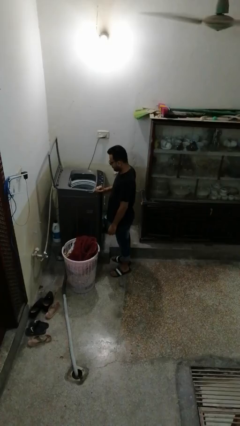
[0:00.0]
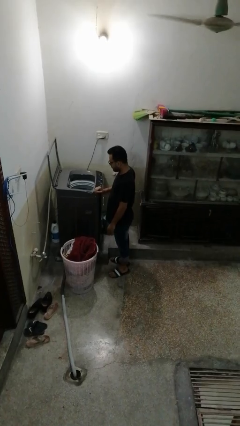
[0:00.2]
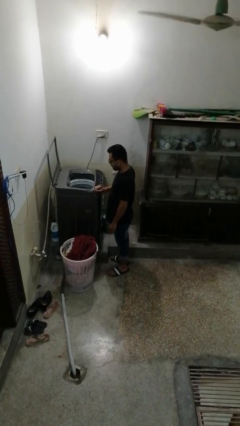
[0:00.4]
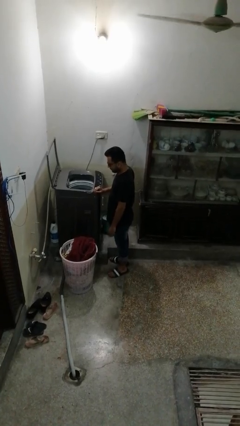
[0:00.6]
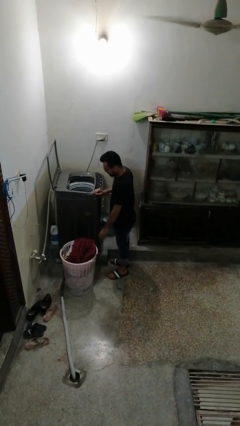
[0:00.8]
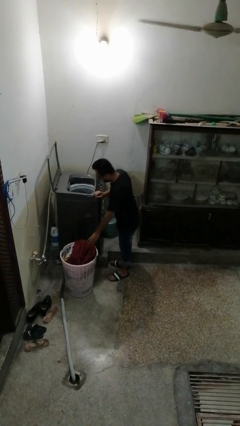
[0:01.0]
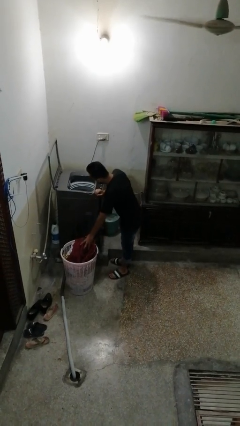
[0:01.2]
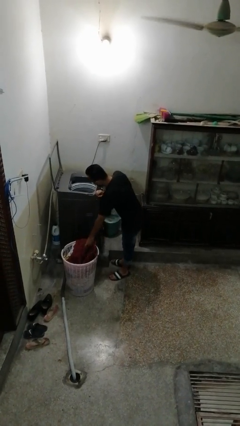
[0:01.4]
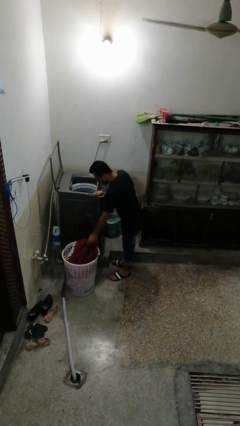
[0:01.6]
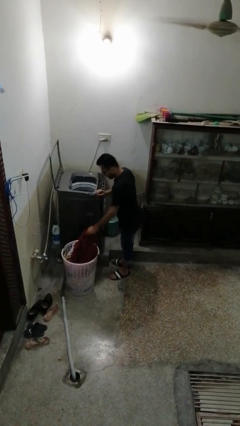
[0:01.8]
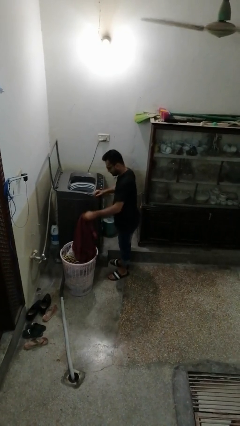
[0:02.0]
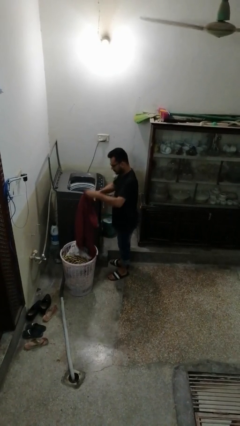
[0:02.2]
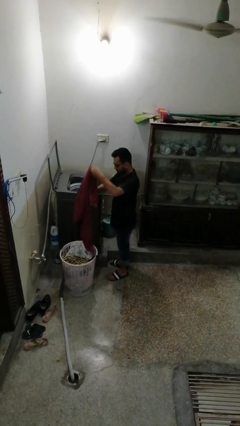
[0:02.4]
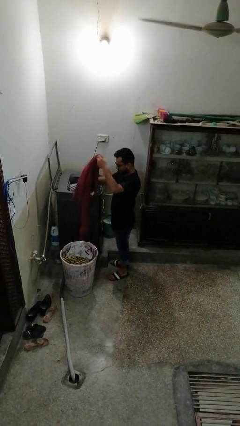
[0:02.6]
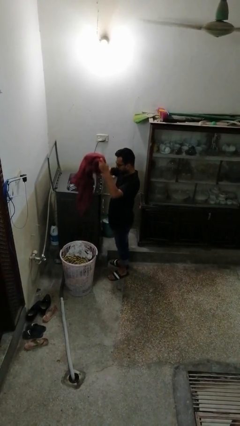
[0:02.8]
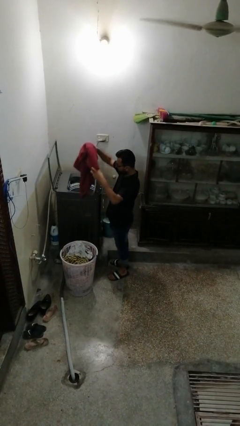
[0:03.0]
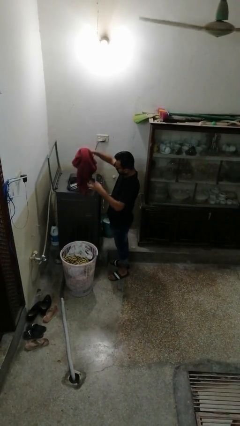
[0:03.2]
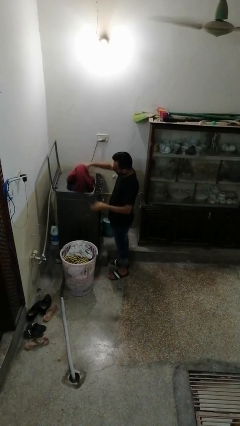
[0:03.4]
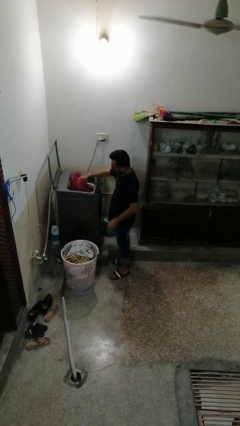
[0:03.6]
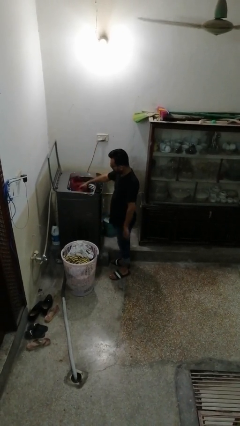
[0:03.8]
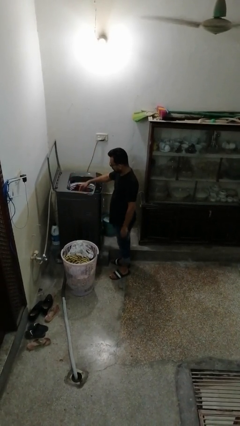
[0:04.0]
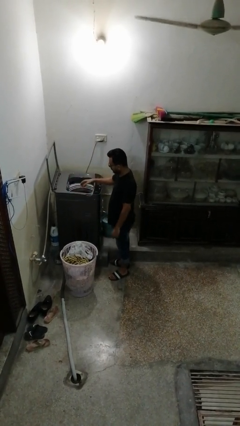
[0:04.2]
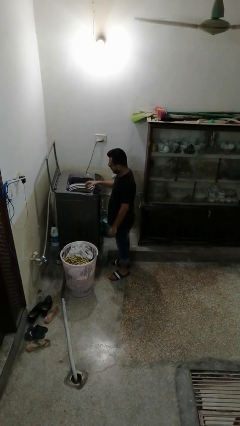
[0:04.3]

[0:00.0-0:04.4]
person loads clotheswasher

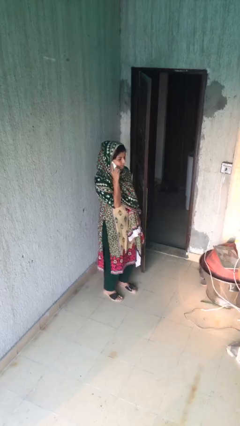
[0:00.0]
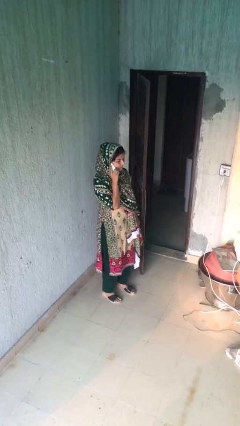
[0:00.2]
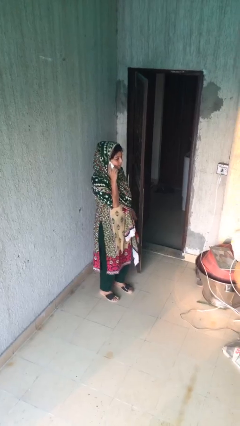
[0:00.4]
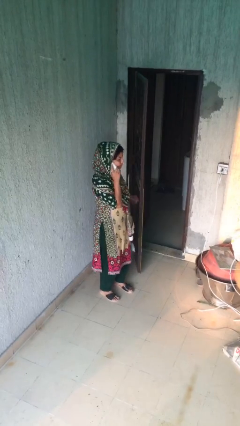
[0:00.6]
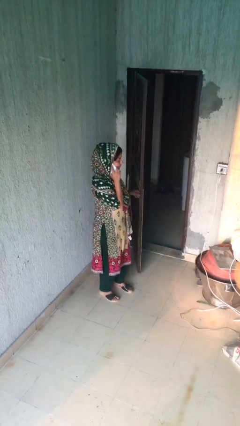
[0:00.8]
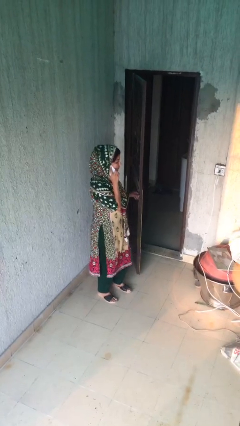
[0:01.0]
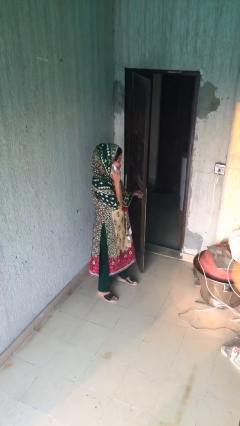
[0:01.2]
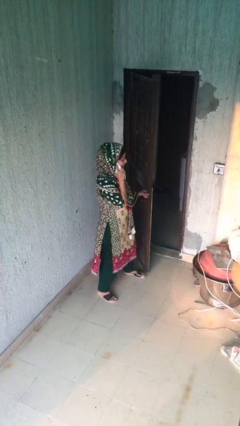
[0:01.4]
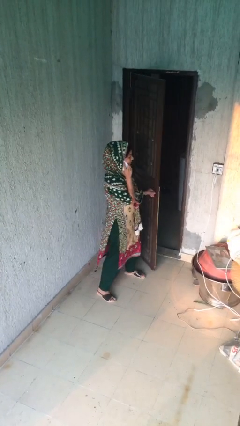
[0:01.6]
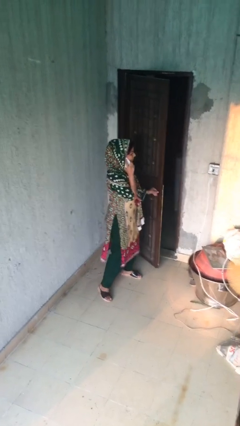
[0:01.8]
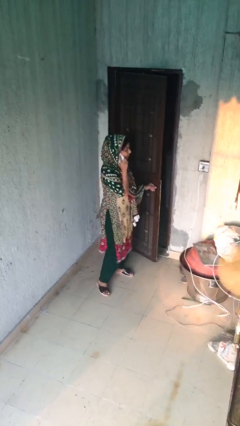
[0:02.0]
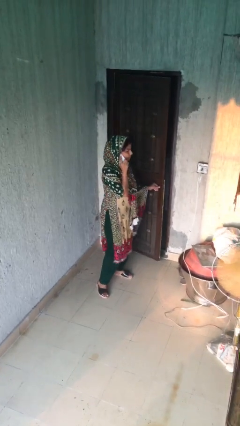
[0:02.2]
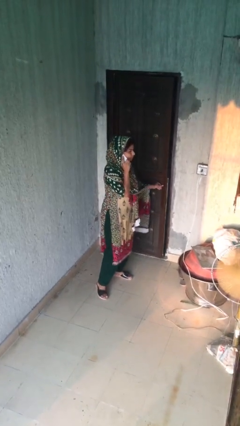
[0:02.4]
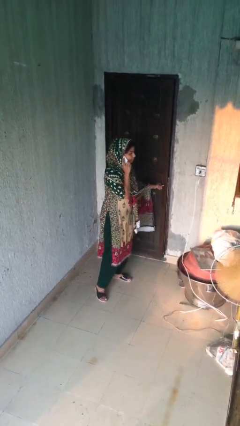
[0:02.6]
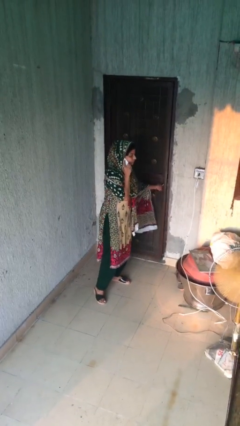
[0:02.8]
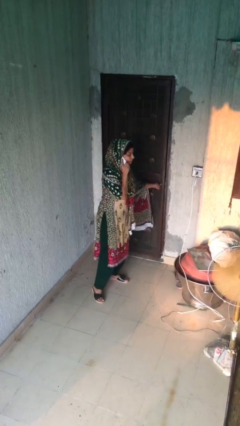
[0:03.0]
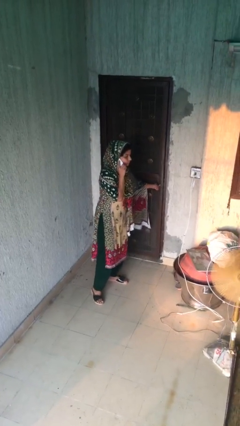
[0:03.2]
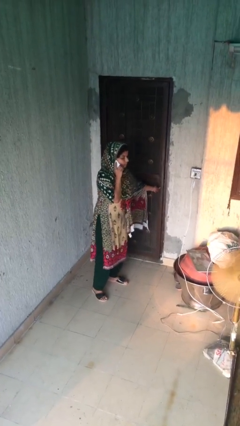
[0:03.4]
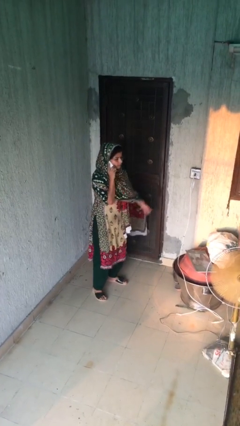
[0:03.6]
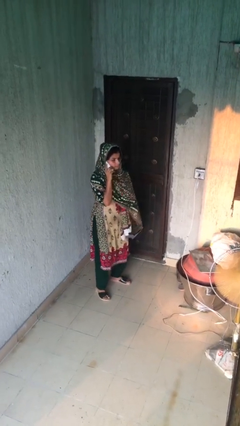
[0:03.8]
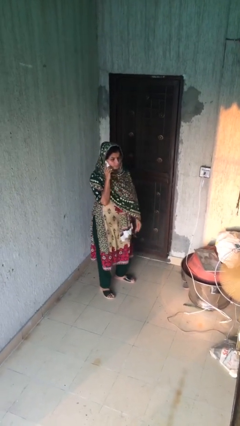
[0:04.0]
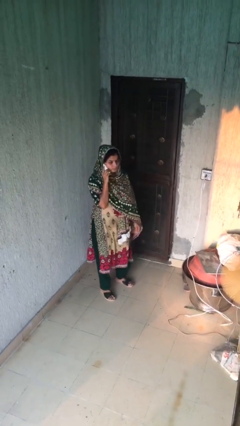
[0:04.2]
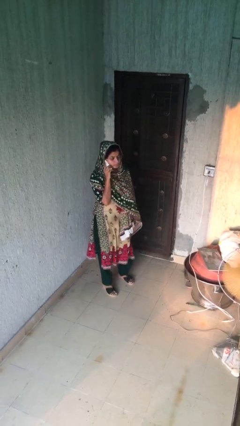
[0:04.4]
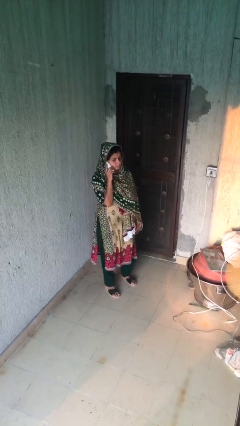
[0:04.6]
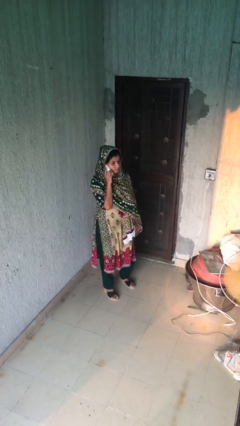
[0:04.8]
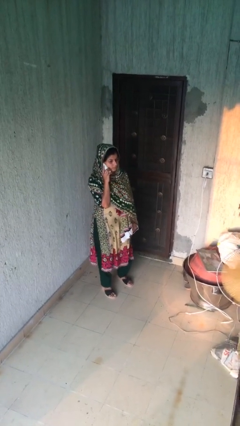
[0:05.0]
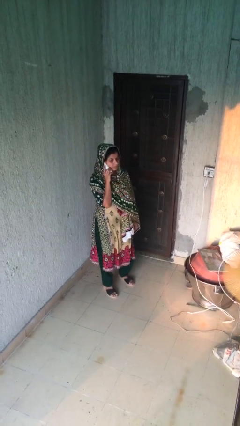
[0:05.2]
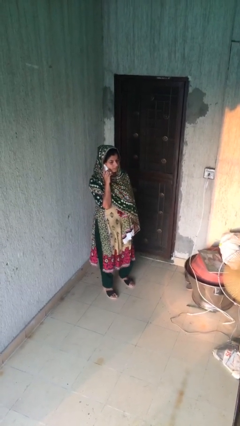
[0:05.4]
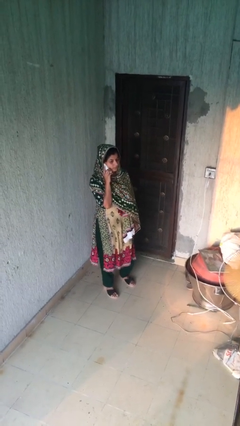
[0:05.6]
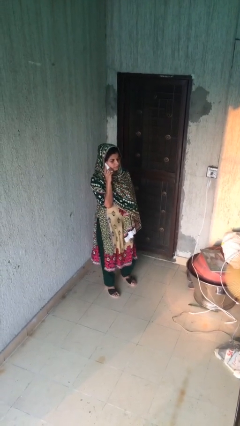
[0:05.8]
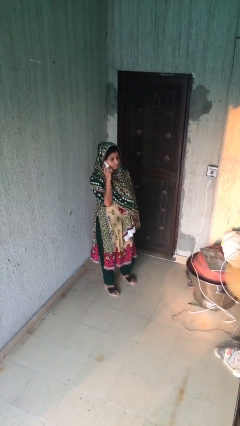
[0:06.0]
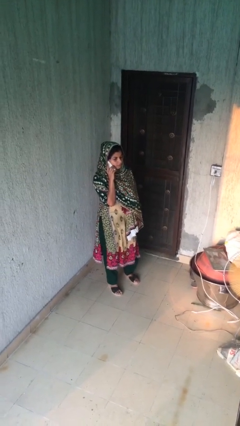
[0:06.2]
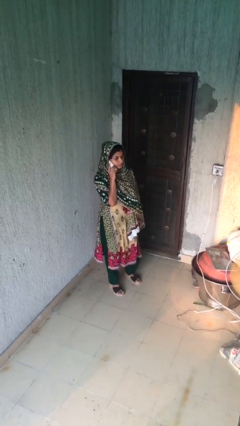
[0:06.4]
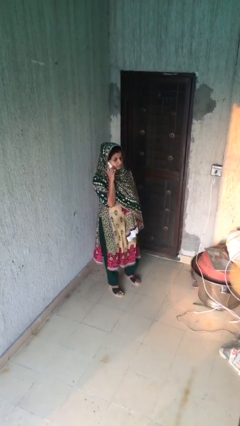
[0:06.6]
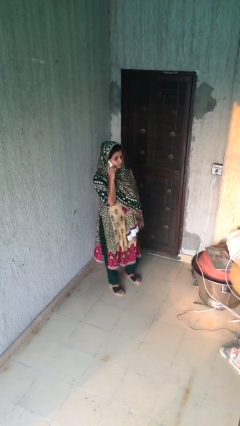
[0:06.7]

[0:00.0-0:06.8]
person closes facility door

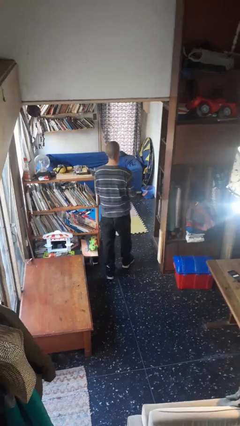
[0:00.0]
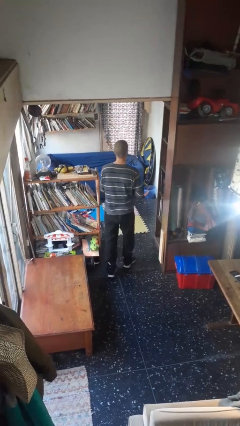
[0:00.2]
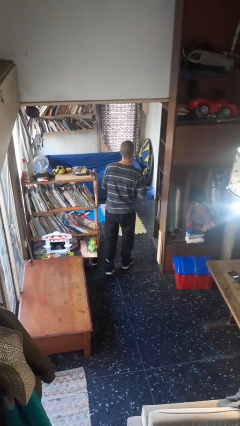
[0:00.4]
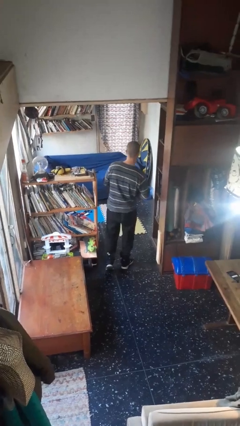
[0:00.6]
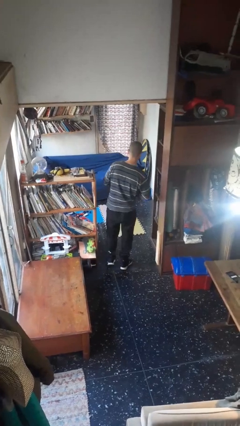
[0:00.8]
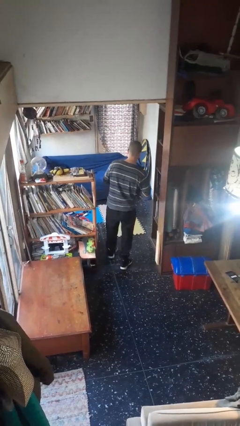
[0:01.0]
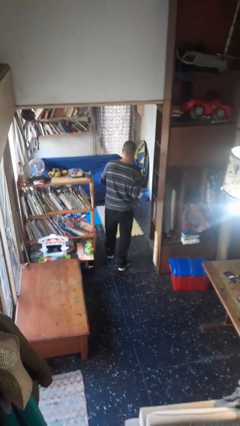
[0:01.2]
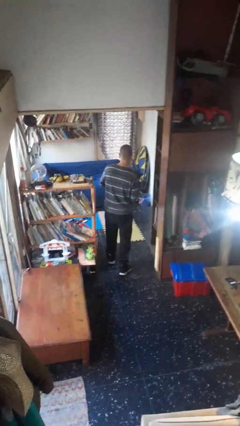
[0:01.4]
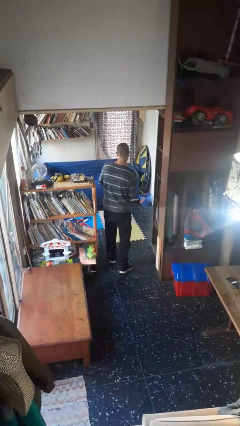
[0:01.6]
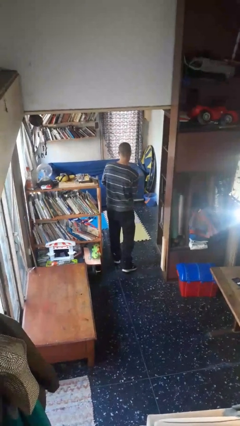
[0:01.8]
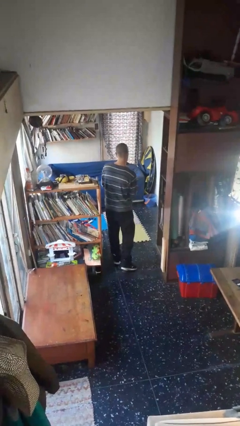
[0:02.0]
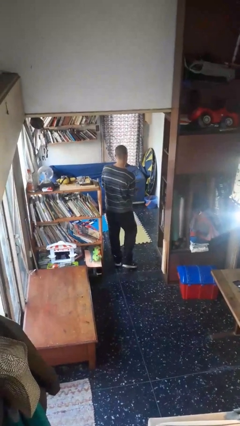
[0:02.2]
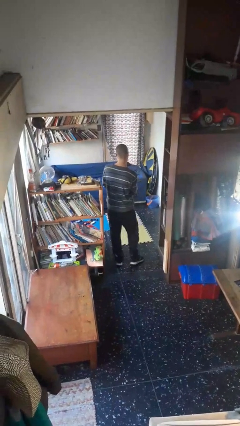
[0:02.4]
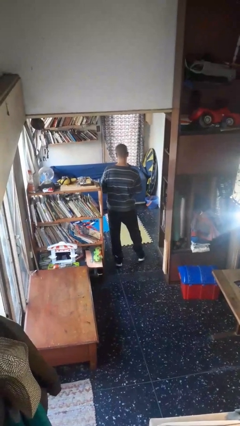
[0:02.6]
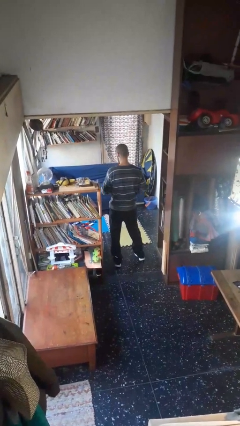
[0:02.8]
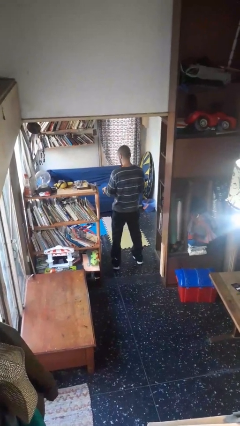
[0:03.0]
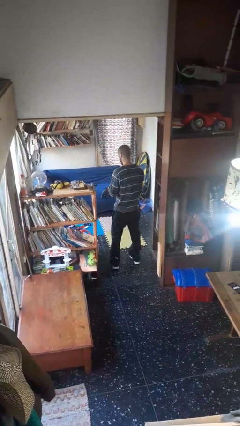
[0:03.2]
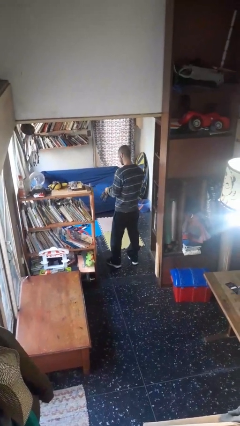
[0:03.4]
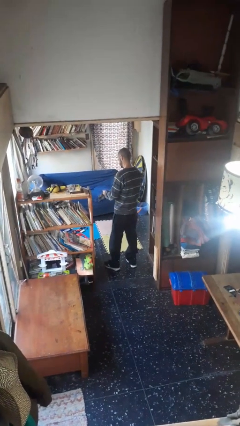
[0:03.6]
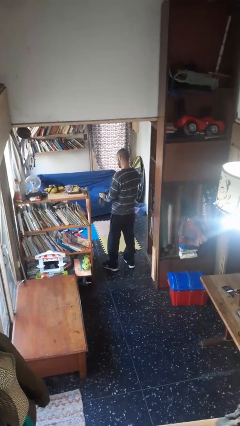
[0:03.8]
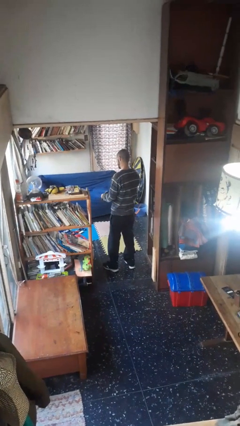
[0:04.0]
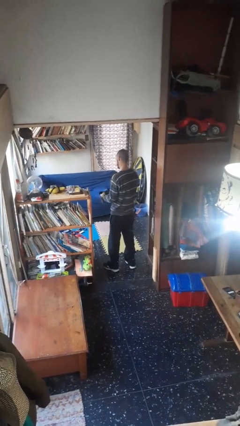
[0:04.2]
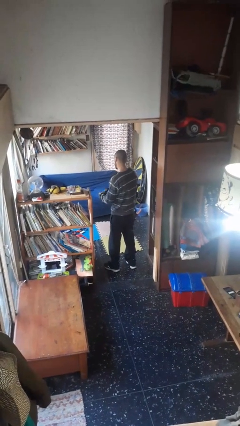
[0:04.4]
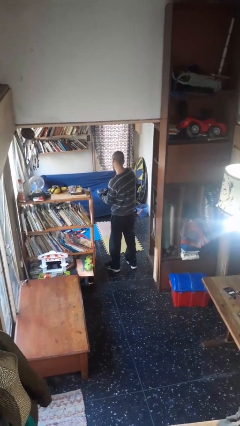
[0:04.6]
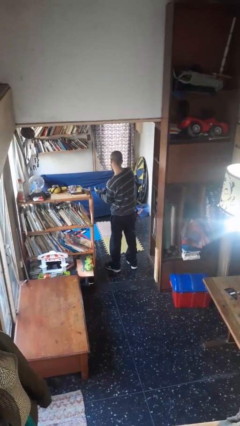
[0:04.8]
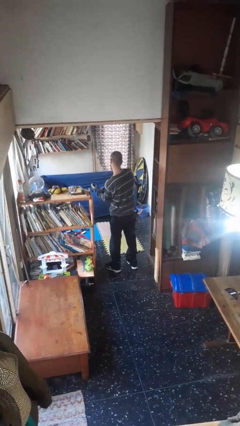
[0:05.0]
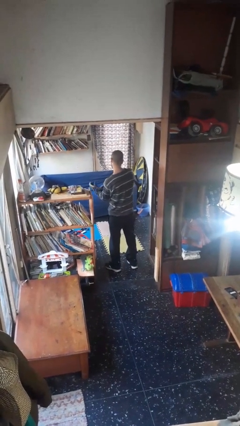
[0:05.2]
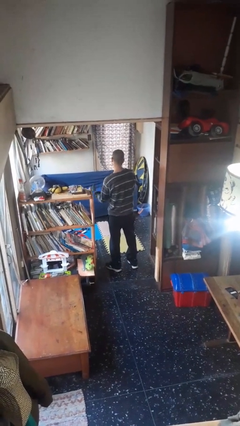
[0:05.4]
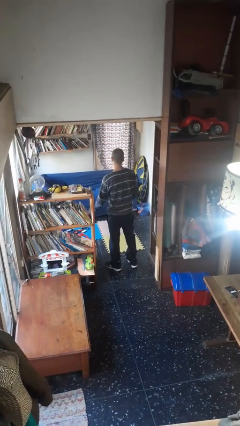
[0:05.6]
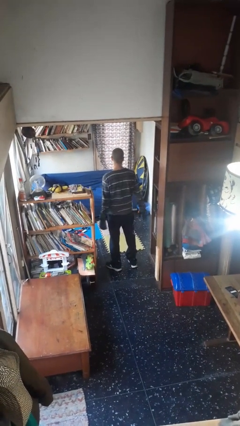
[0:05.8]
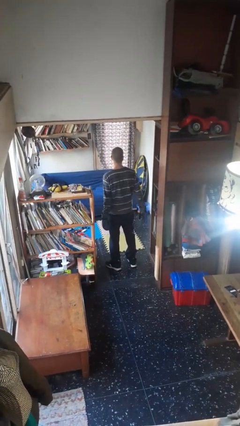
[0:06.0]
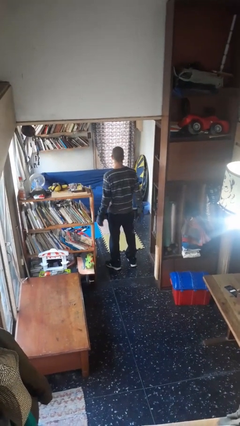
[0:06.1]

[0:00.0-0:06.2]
person puts on gloves

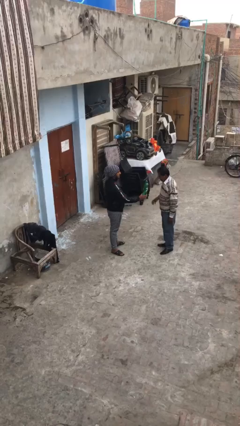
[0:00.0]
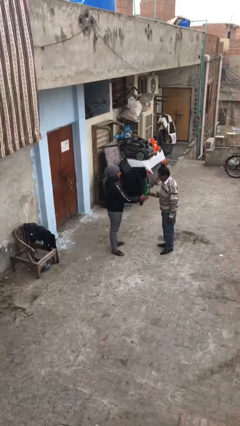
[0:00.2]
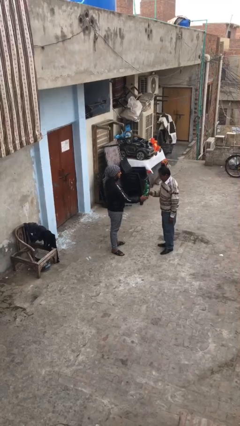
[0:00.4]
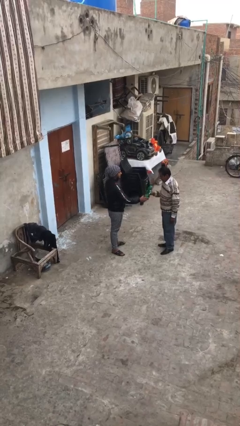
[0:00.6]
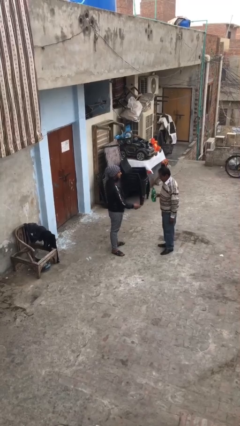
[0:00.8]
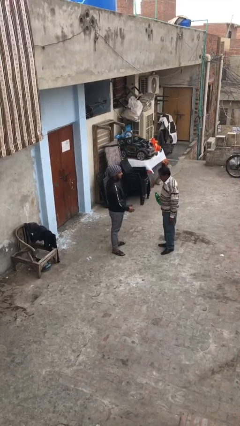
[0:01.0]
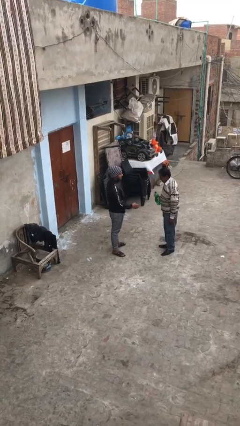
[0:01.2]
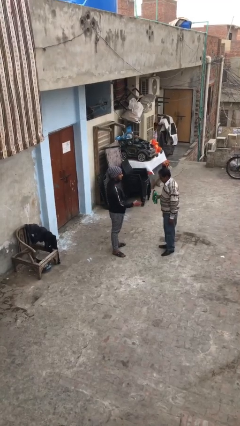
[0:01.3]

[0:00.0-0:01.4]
person transfers object to person
